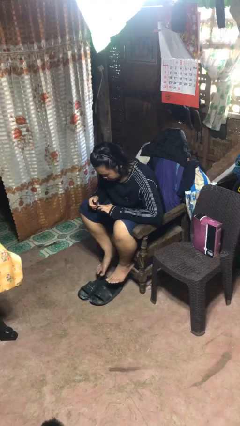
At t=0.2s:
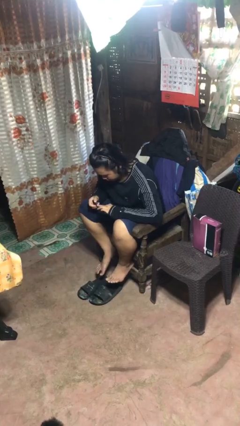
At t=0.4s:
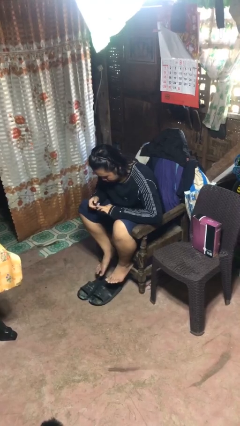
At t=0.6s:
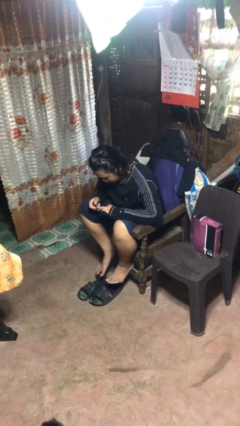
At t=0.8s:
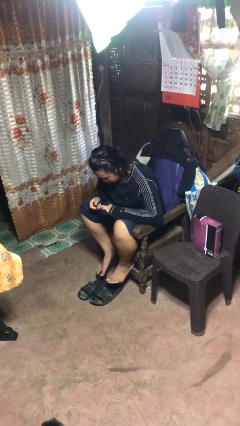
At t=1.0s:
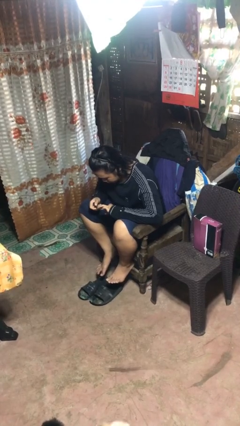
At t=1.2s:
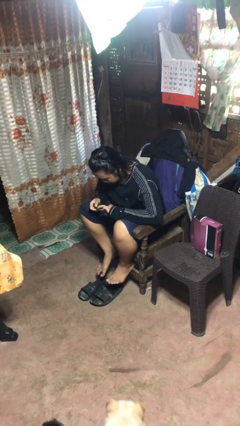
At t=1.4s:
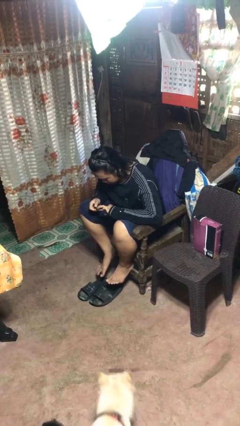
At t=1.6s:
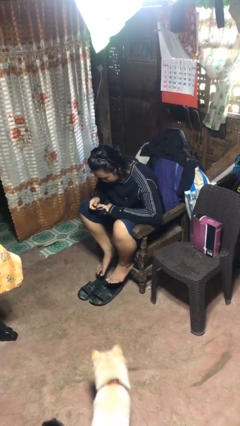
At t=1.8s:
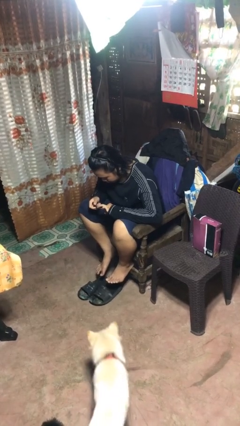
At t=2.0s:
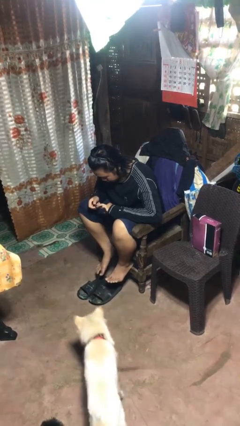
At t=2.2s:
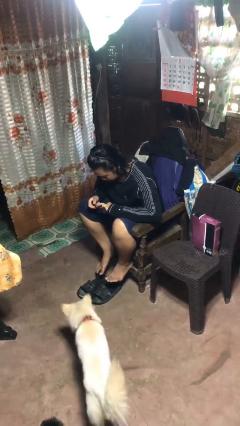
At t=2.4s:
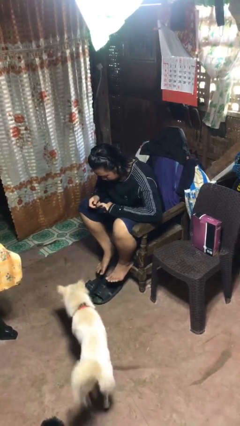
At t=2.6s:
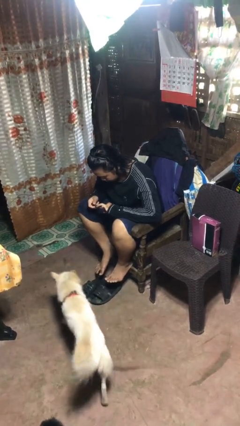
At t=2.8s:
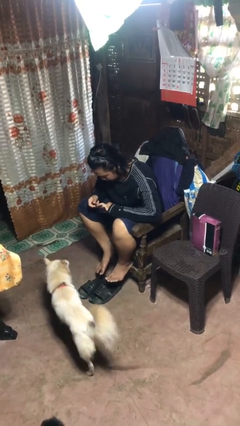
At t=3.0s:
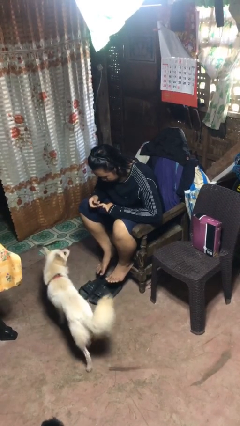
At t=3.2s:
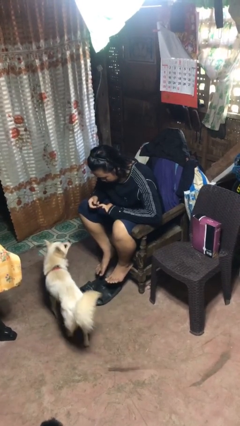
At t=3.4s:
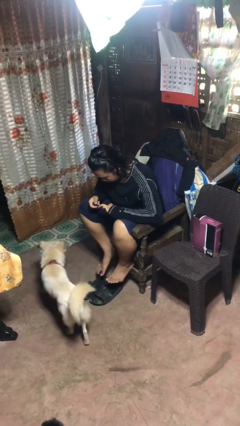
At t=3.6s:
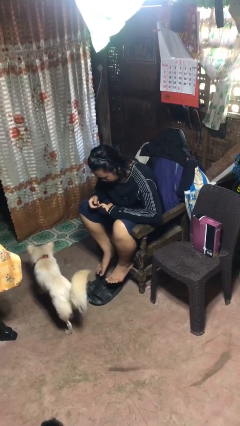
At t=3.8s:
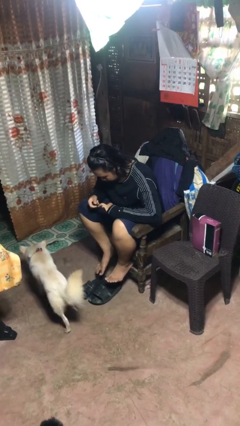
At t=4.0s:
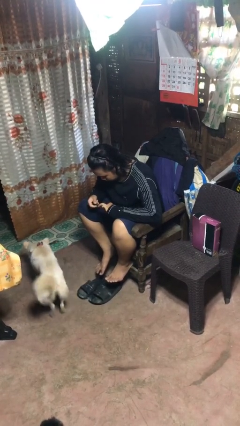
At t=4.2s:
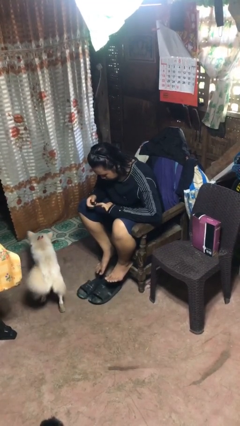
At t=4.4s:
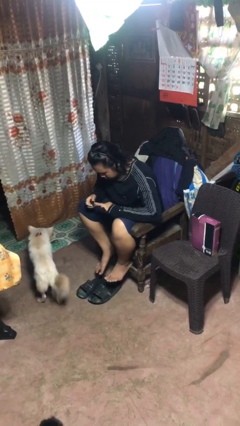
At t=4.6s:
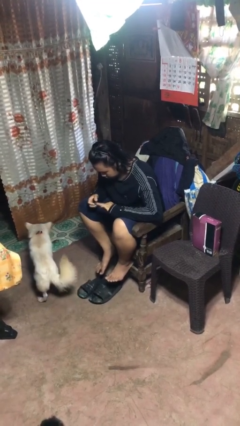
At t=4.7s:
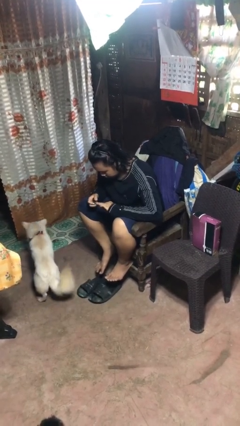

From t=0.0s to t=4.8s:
person clips fingernails

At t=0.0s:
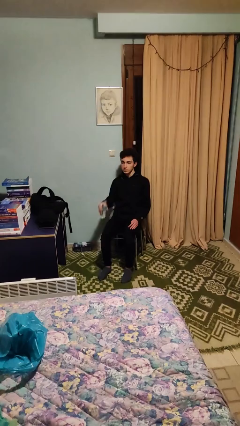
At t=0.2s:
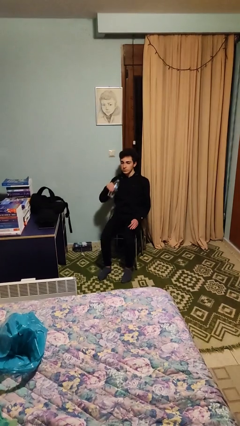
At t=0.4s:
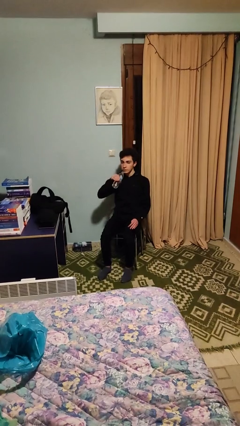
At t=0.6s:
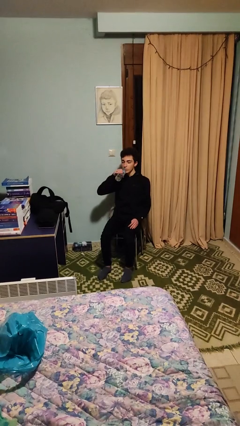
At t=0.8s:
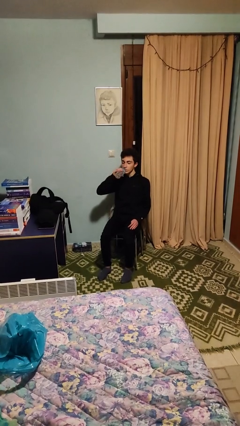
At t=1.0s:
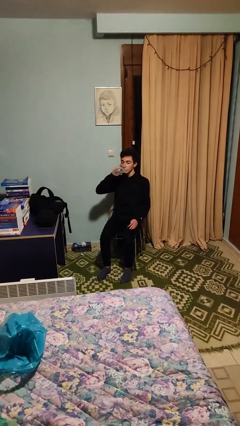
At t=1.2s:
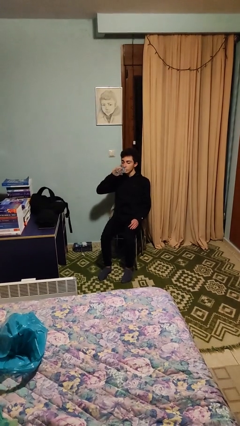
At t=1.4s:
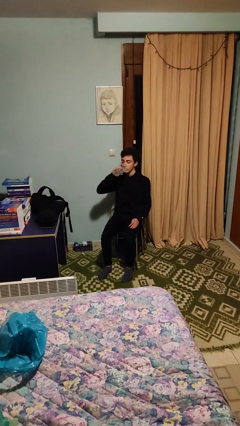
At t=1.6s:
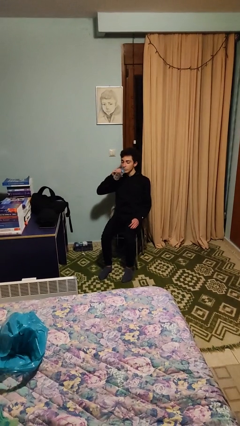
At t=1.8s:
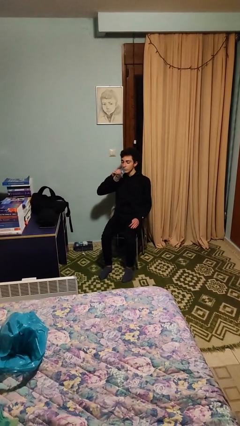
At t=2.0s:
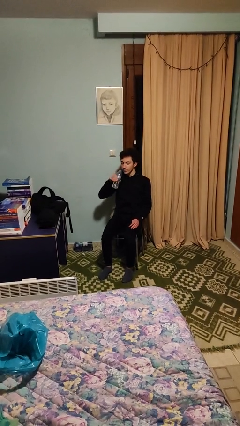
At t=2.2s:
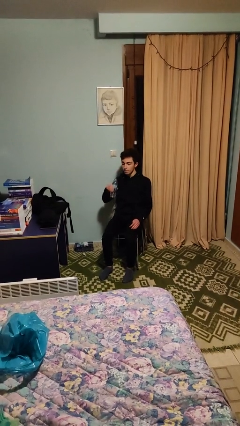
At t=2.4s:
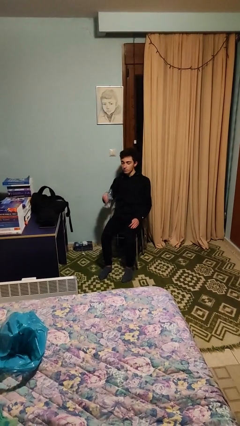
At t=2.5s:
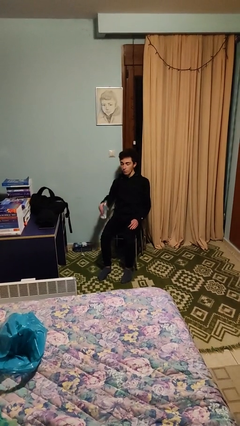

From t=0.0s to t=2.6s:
person drinks from bottle

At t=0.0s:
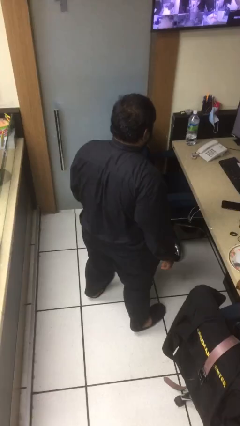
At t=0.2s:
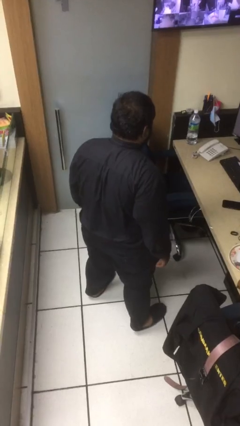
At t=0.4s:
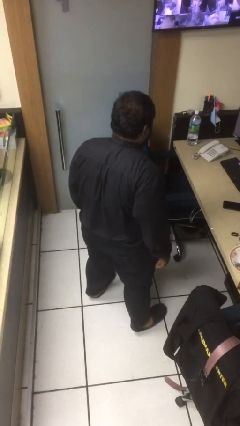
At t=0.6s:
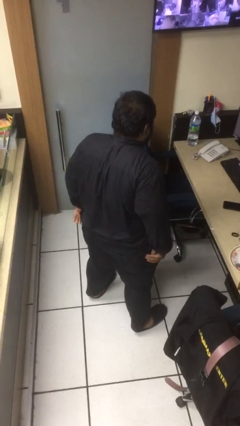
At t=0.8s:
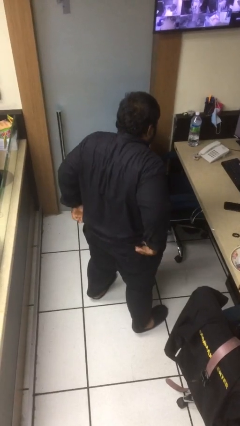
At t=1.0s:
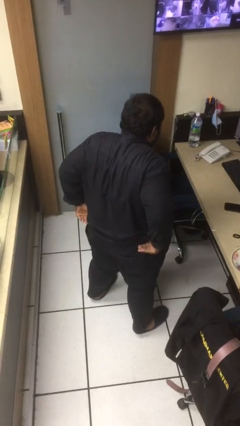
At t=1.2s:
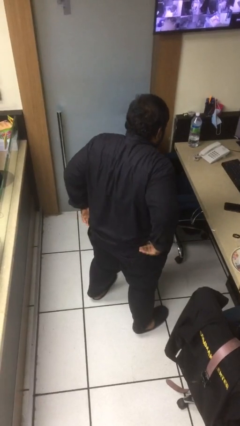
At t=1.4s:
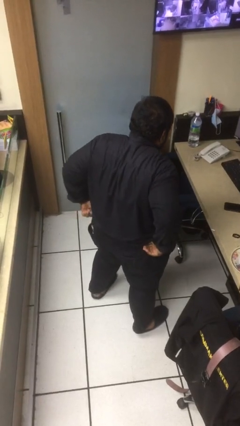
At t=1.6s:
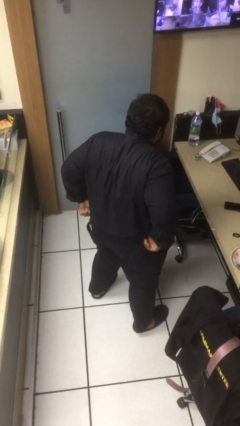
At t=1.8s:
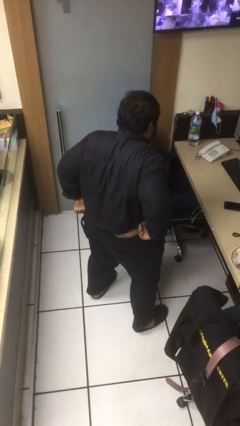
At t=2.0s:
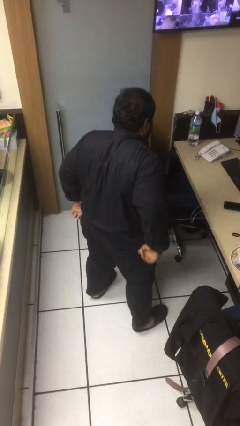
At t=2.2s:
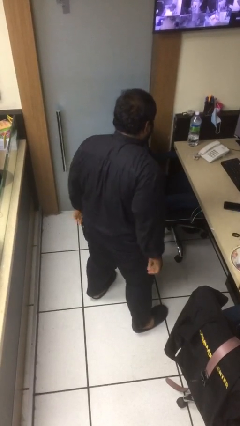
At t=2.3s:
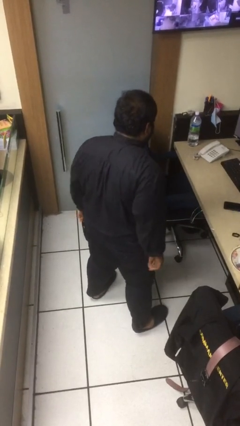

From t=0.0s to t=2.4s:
person hikes up pants

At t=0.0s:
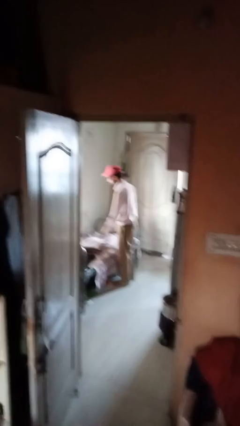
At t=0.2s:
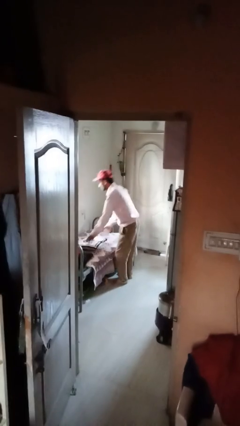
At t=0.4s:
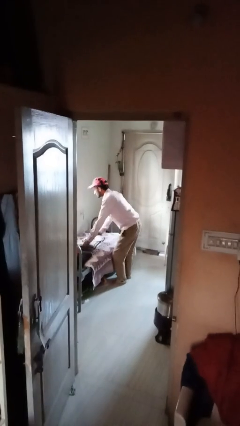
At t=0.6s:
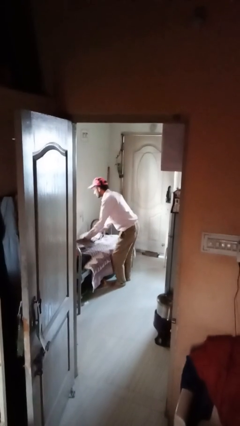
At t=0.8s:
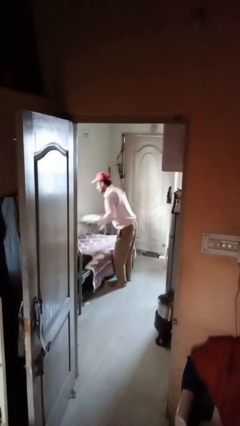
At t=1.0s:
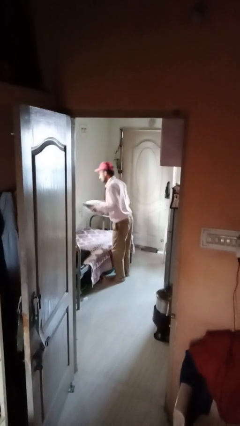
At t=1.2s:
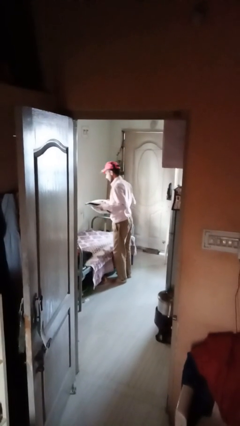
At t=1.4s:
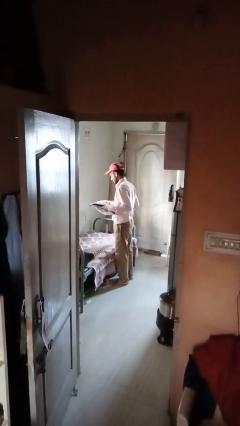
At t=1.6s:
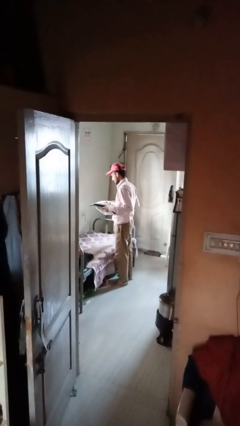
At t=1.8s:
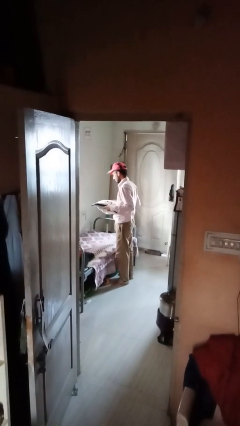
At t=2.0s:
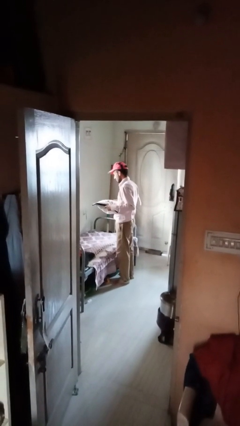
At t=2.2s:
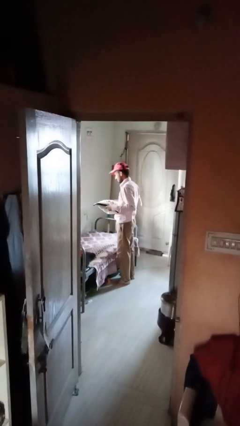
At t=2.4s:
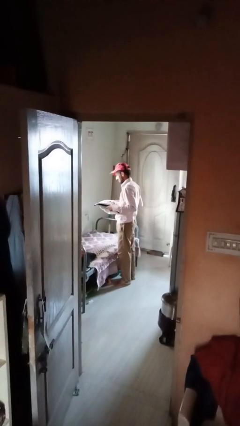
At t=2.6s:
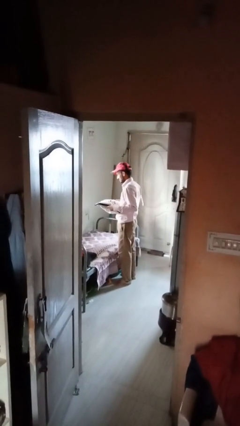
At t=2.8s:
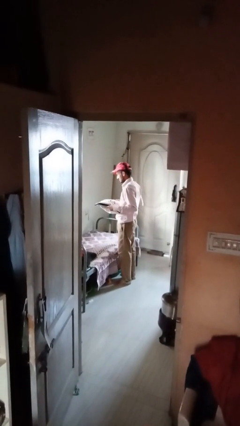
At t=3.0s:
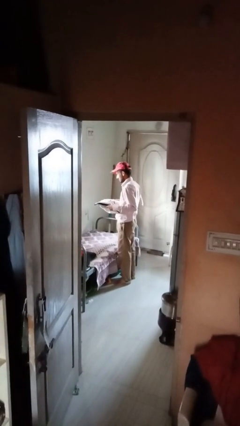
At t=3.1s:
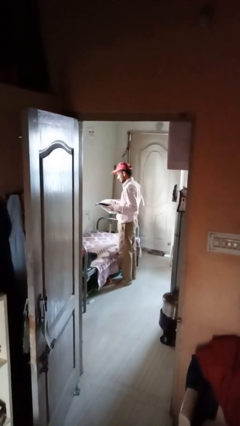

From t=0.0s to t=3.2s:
person picks up object from bed

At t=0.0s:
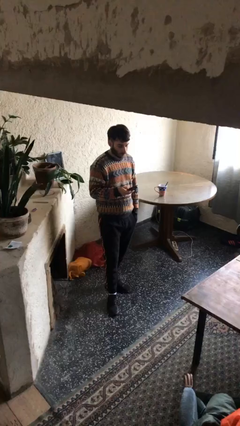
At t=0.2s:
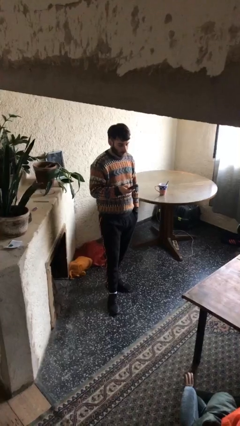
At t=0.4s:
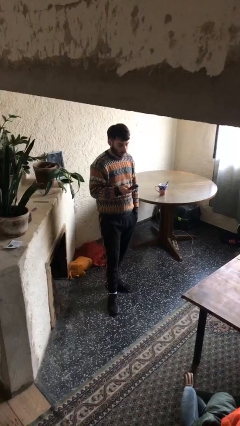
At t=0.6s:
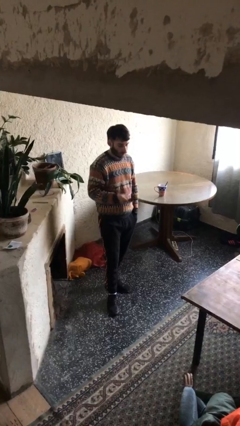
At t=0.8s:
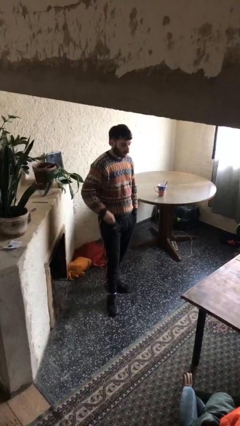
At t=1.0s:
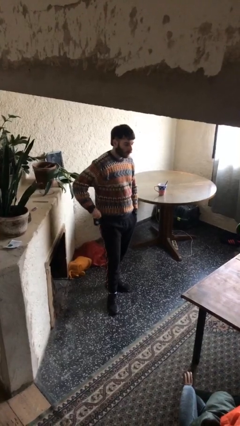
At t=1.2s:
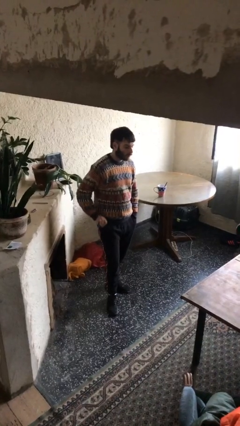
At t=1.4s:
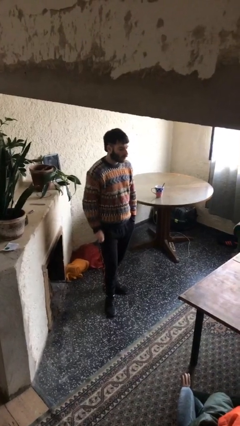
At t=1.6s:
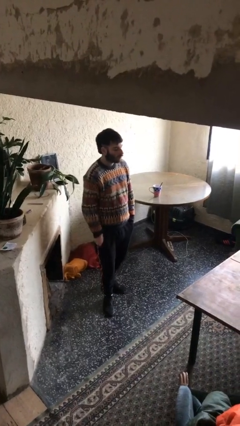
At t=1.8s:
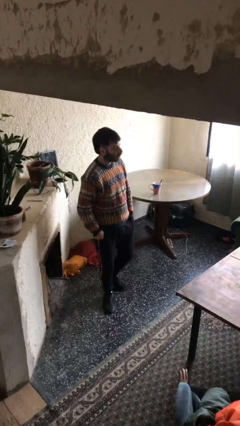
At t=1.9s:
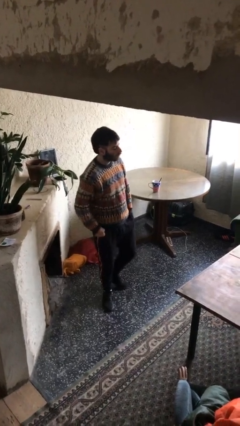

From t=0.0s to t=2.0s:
person puts phone into pocket

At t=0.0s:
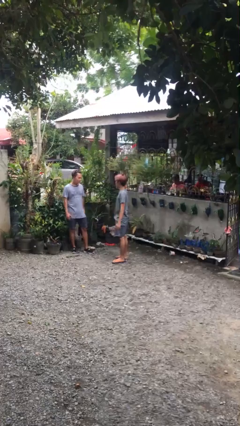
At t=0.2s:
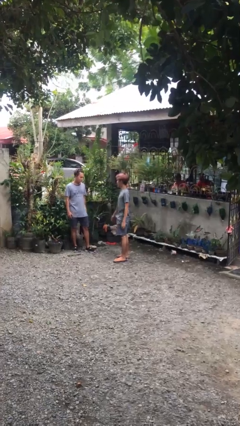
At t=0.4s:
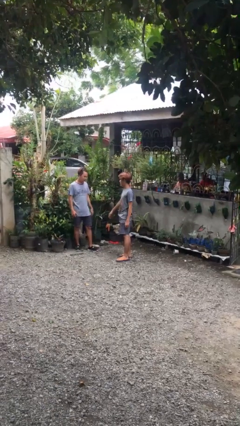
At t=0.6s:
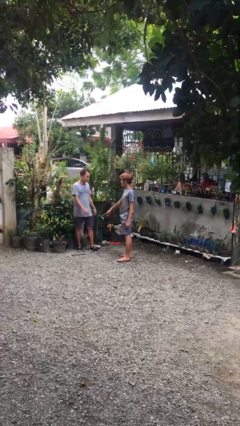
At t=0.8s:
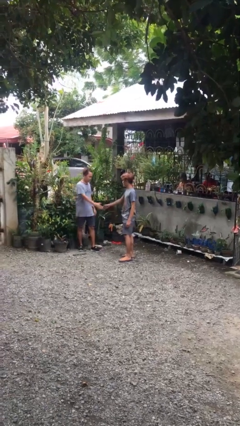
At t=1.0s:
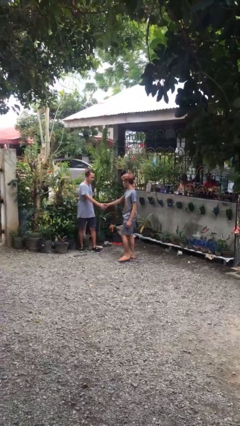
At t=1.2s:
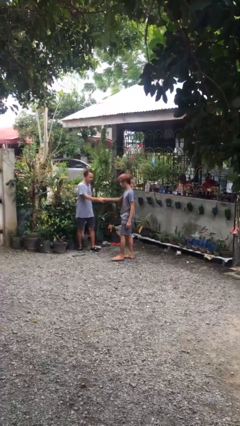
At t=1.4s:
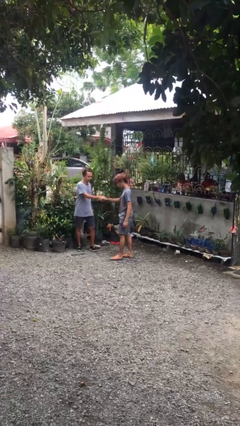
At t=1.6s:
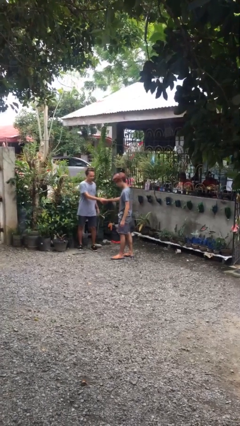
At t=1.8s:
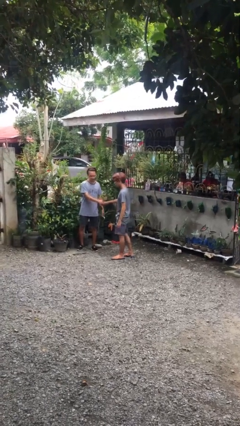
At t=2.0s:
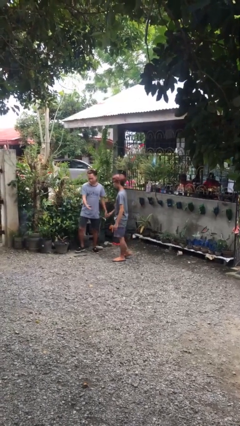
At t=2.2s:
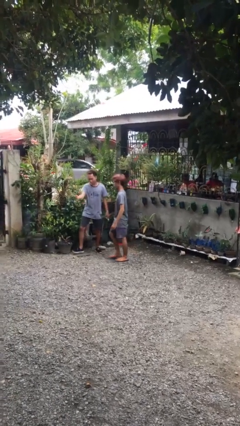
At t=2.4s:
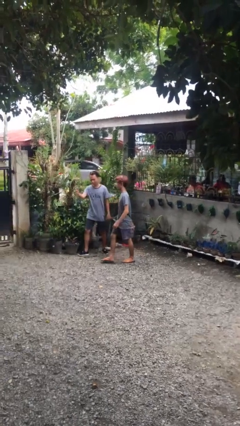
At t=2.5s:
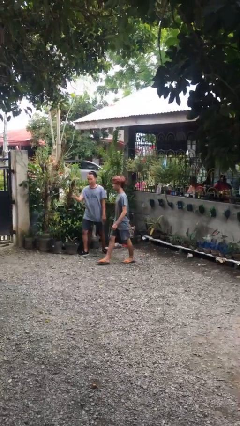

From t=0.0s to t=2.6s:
person shakes hand
